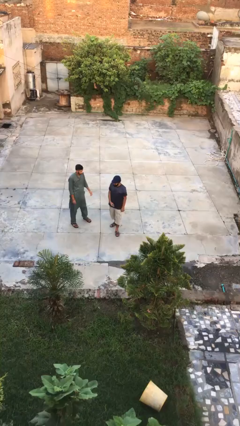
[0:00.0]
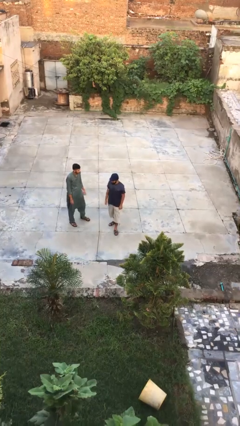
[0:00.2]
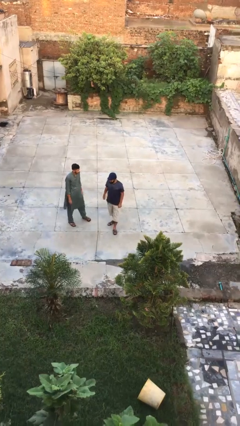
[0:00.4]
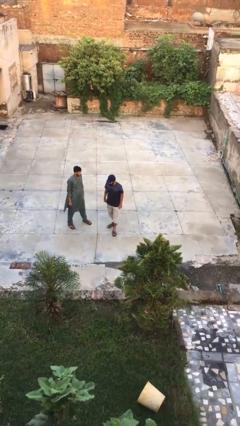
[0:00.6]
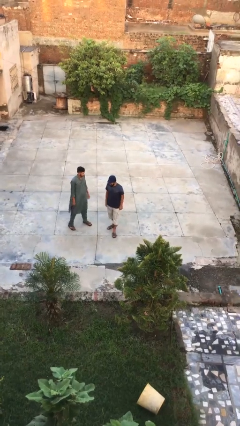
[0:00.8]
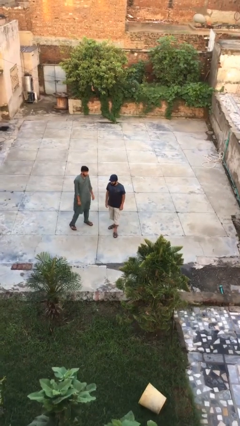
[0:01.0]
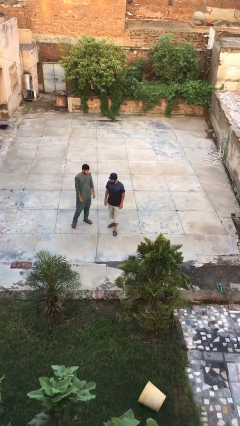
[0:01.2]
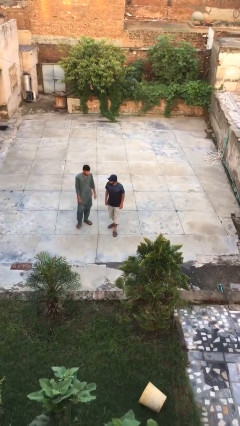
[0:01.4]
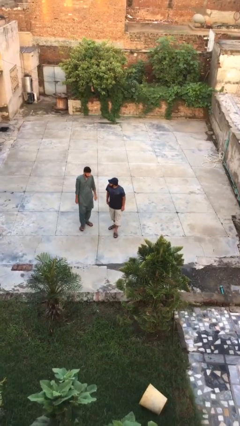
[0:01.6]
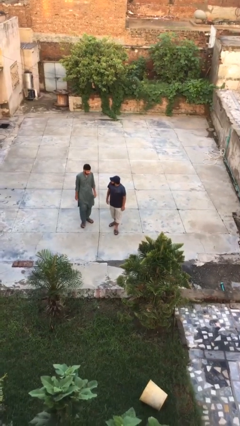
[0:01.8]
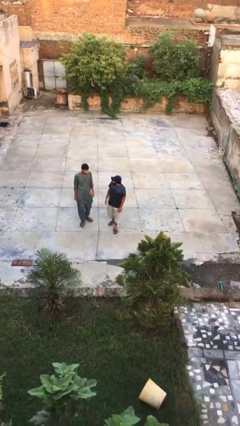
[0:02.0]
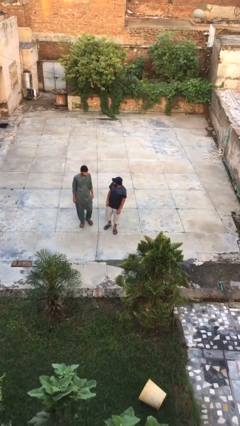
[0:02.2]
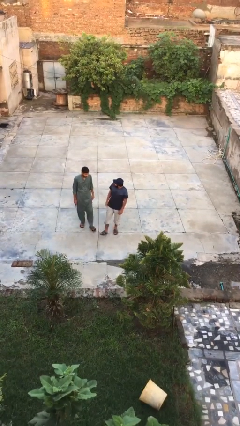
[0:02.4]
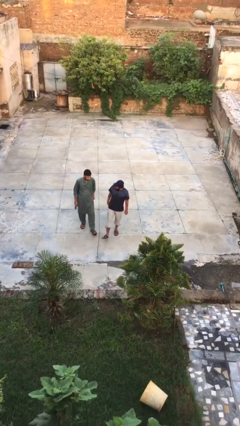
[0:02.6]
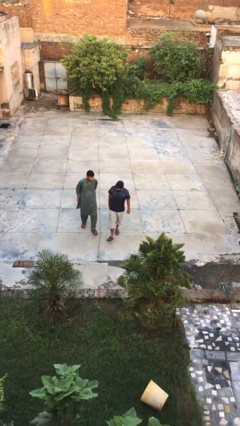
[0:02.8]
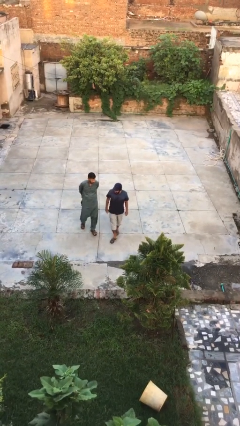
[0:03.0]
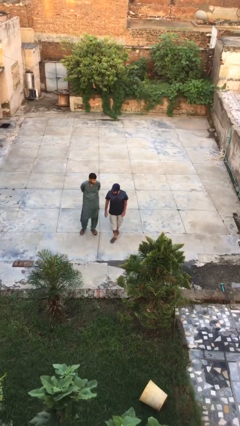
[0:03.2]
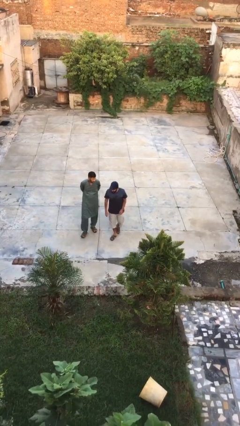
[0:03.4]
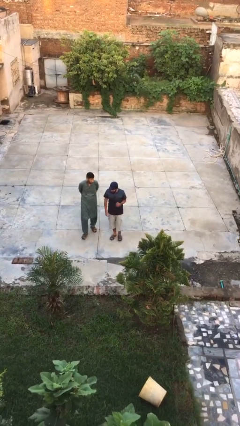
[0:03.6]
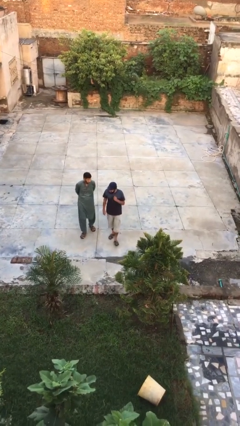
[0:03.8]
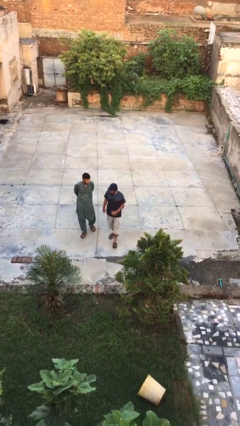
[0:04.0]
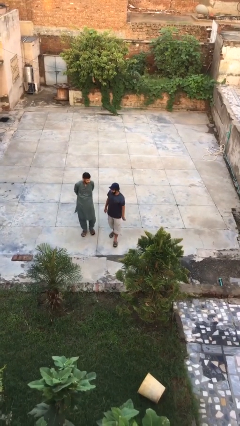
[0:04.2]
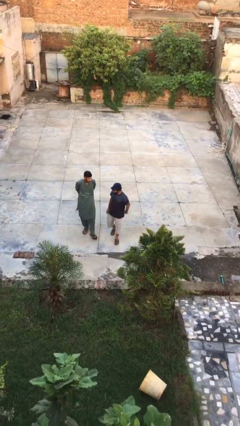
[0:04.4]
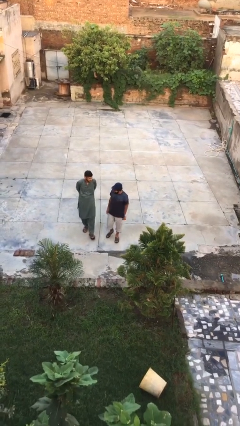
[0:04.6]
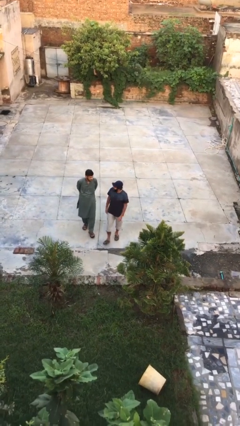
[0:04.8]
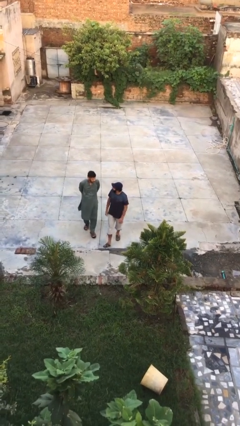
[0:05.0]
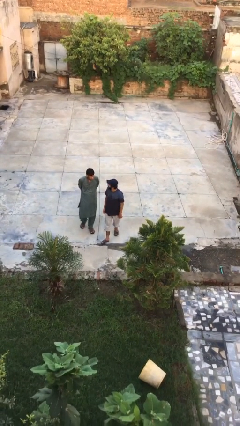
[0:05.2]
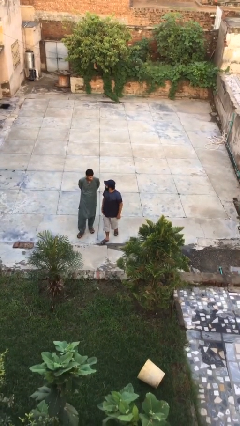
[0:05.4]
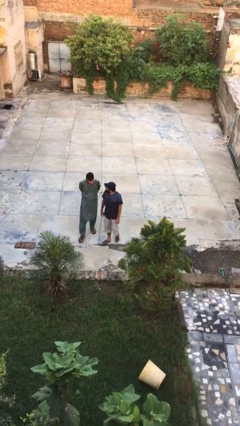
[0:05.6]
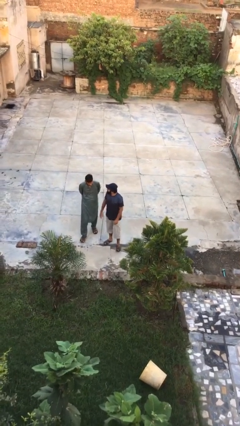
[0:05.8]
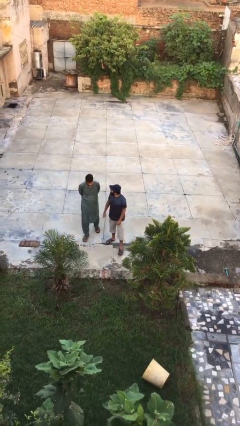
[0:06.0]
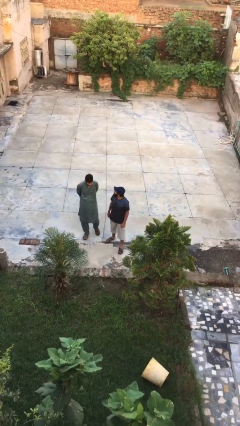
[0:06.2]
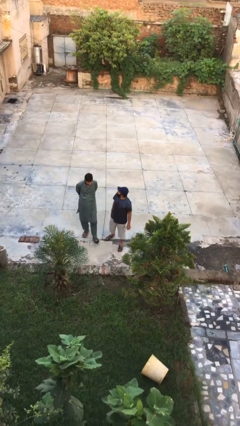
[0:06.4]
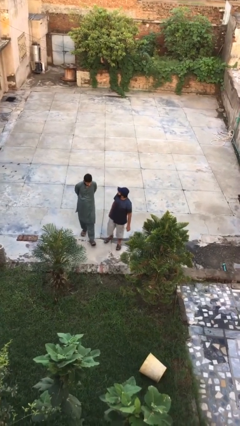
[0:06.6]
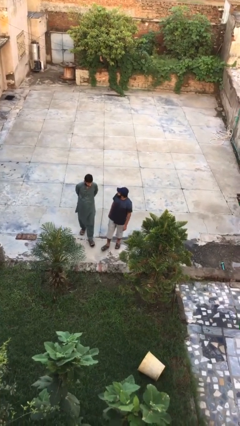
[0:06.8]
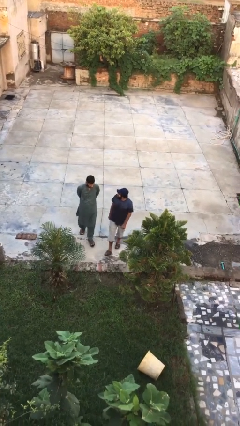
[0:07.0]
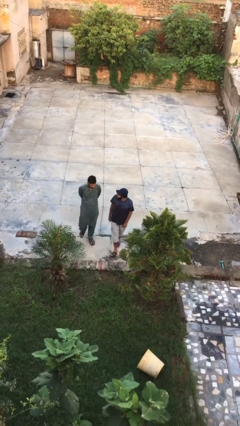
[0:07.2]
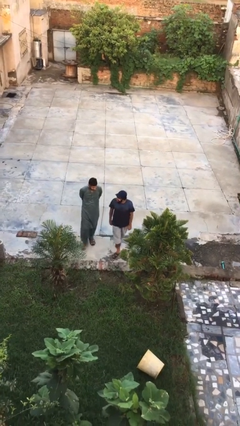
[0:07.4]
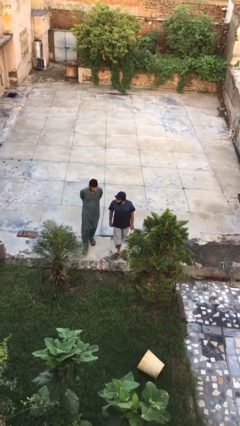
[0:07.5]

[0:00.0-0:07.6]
person talks to person

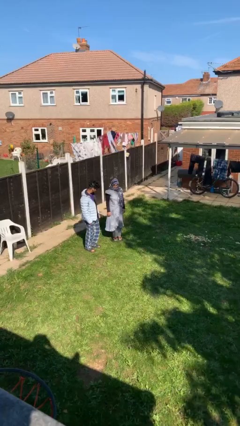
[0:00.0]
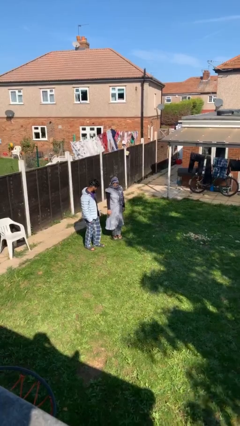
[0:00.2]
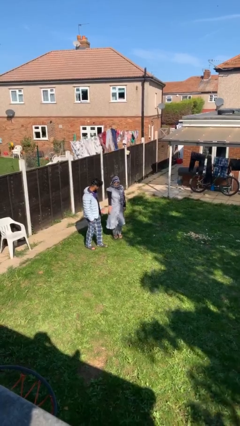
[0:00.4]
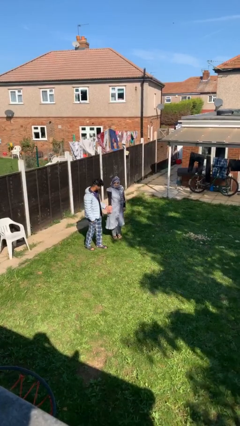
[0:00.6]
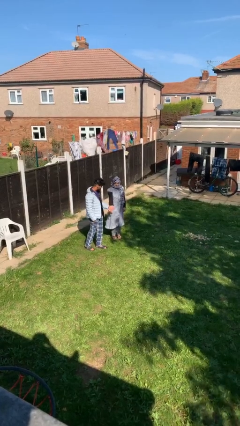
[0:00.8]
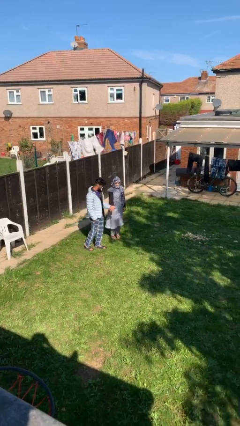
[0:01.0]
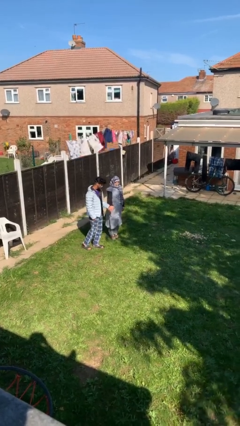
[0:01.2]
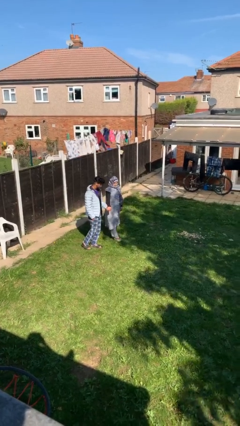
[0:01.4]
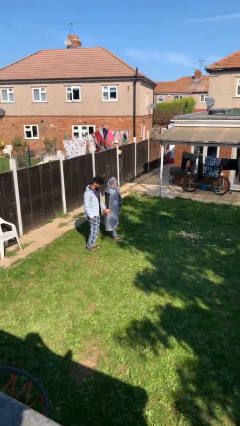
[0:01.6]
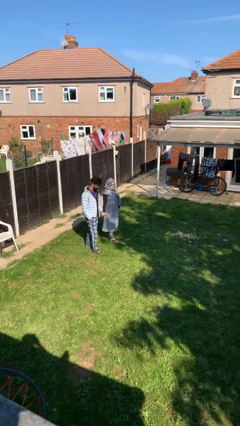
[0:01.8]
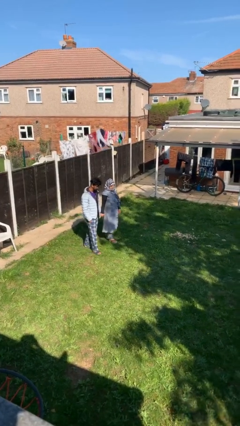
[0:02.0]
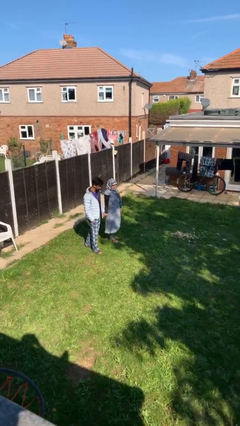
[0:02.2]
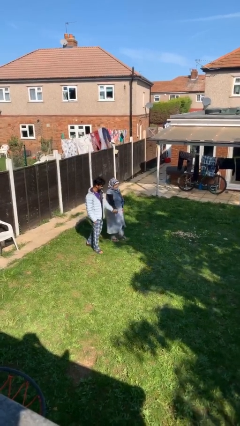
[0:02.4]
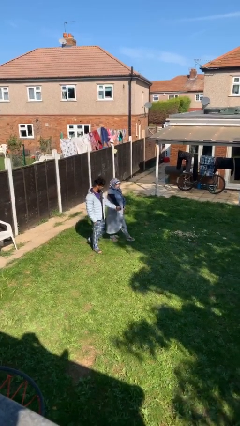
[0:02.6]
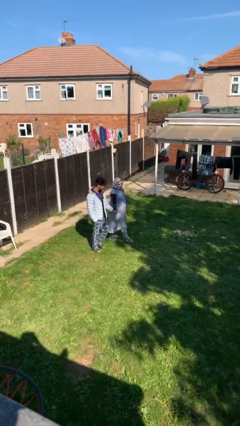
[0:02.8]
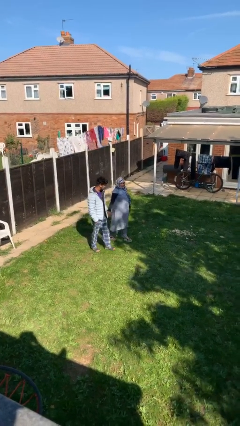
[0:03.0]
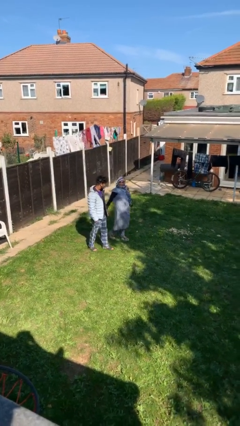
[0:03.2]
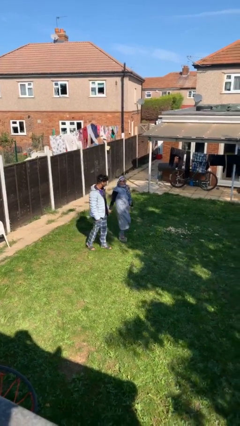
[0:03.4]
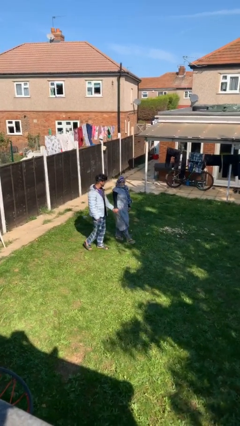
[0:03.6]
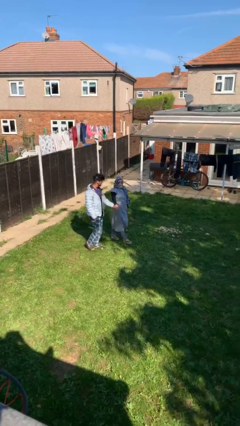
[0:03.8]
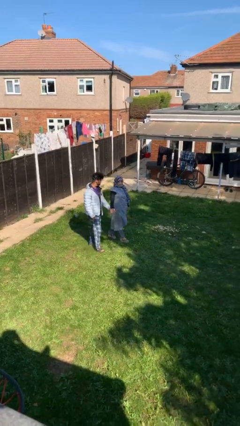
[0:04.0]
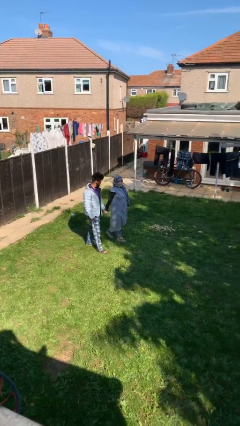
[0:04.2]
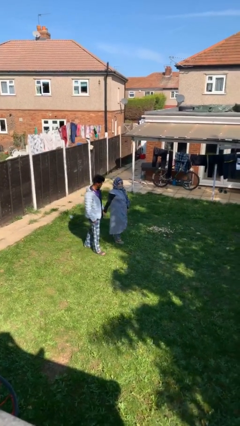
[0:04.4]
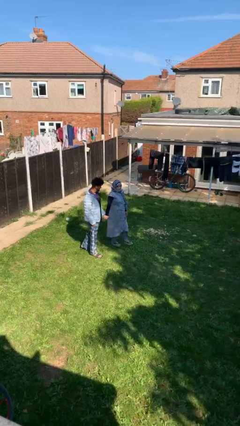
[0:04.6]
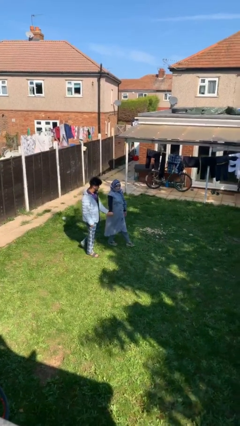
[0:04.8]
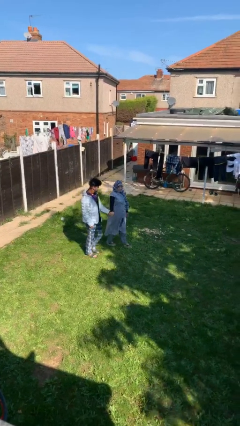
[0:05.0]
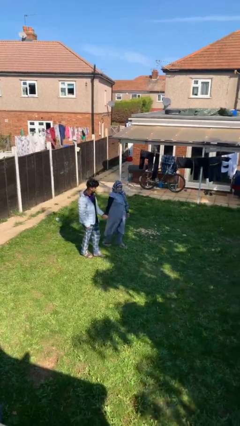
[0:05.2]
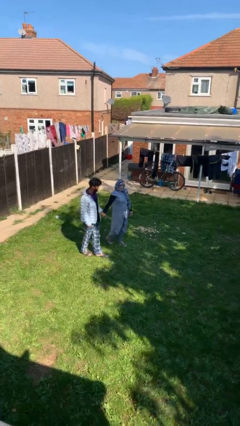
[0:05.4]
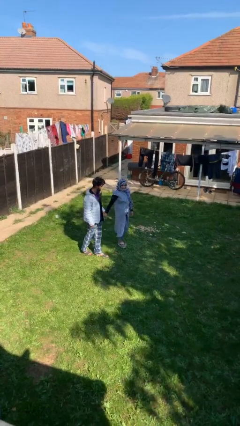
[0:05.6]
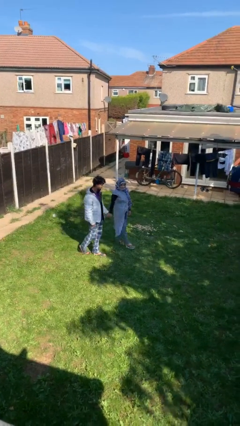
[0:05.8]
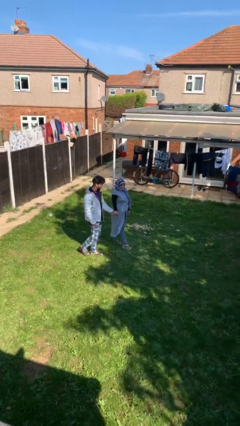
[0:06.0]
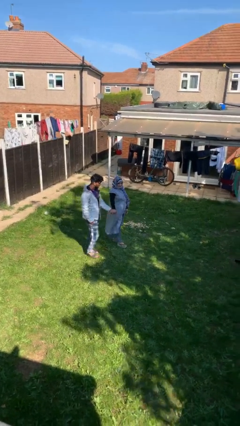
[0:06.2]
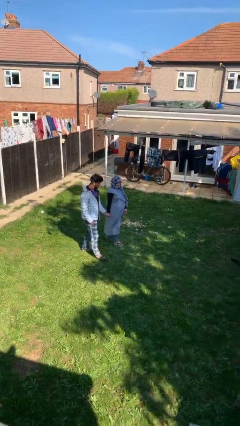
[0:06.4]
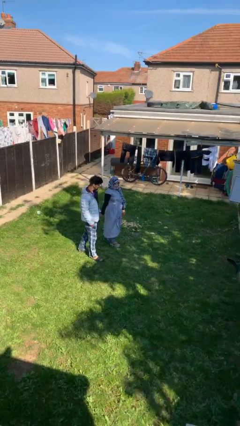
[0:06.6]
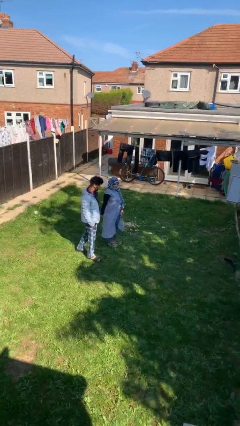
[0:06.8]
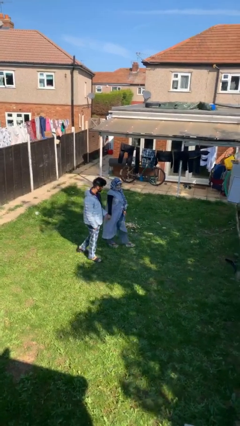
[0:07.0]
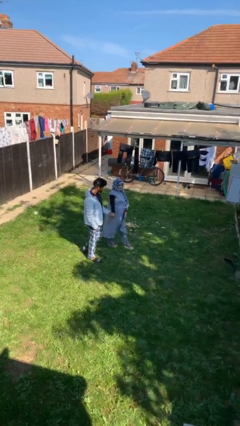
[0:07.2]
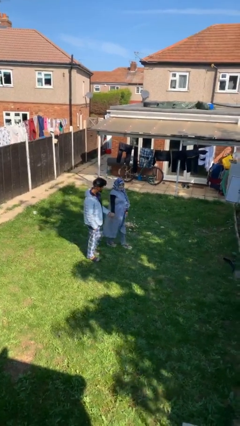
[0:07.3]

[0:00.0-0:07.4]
person holds hand

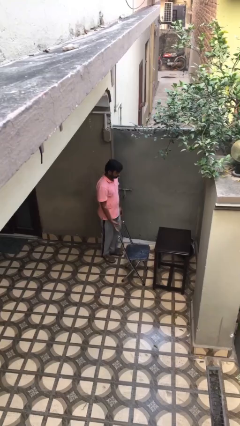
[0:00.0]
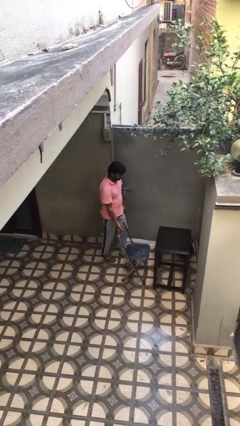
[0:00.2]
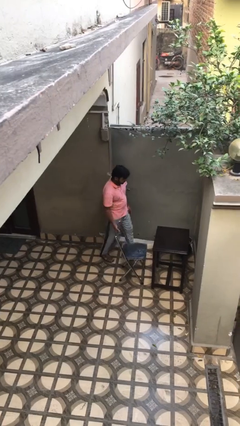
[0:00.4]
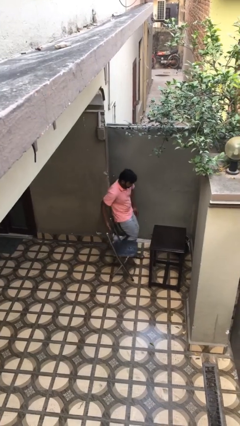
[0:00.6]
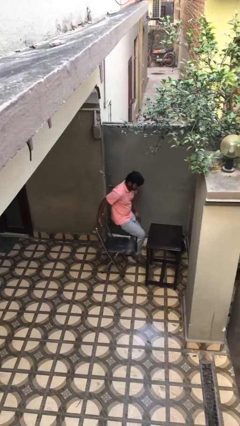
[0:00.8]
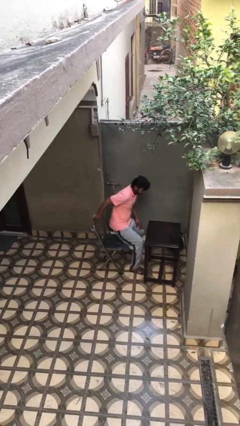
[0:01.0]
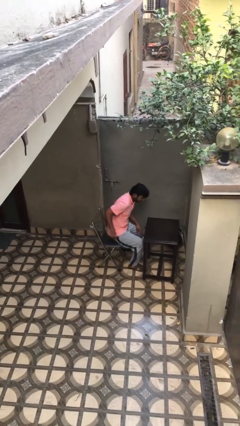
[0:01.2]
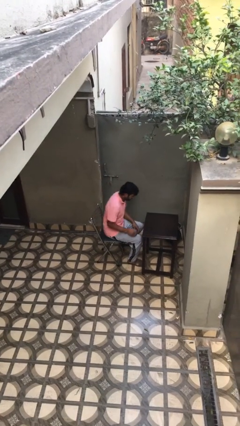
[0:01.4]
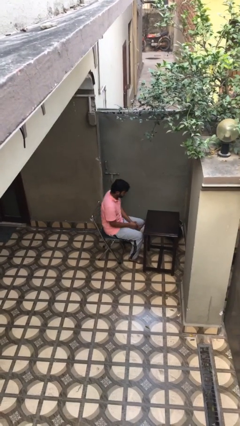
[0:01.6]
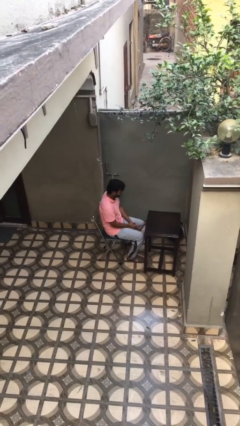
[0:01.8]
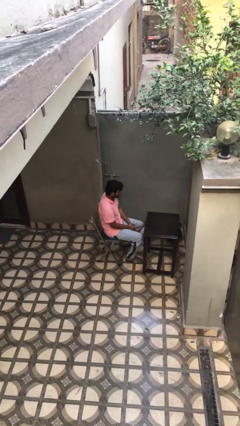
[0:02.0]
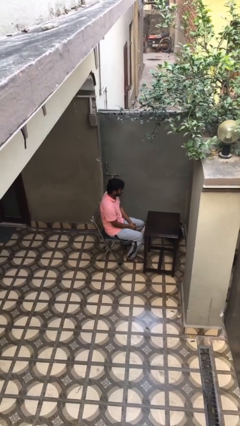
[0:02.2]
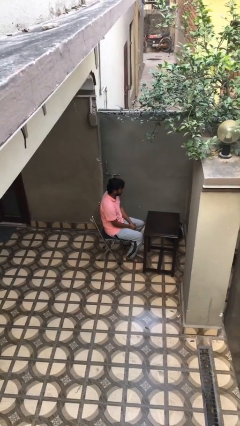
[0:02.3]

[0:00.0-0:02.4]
person sits down

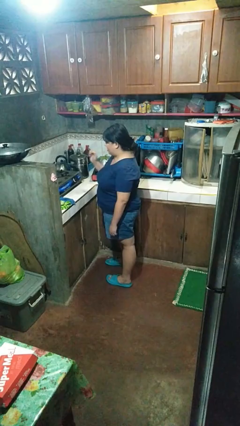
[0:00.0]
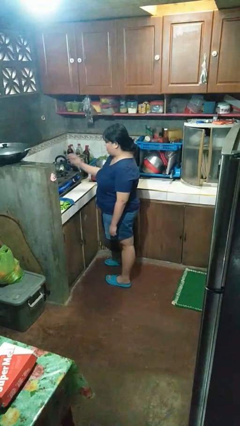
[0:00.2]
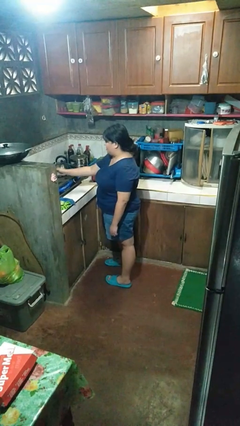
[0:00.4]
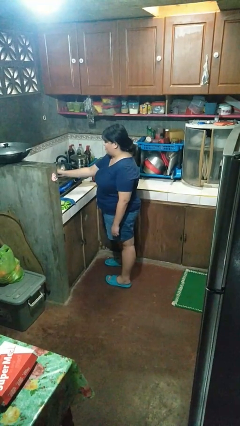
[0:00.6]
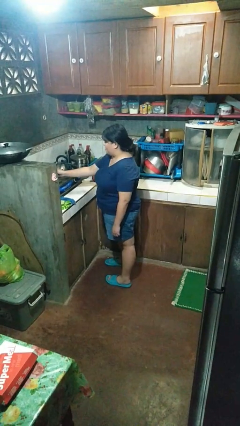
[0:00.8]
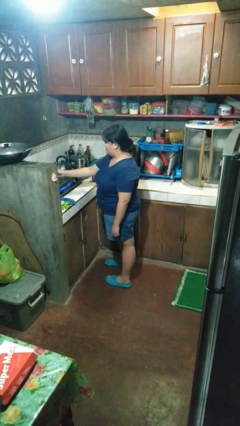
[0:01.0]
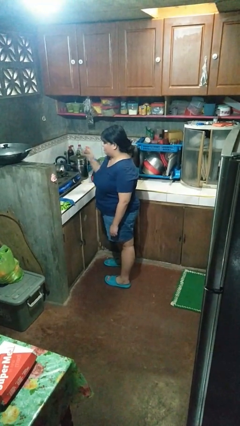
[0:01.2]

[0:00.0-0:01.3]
person burns hand
